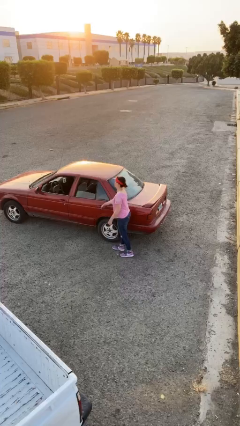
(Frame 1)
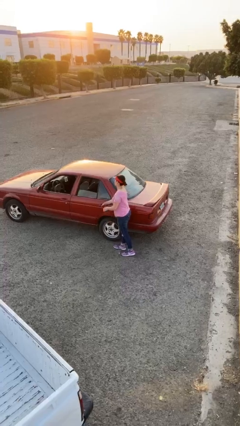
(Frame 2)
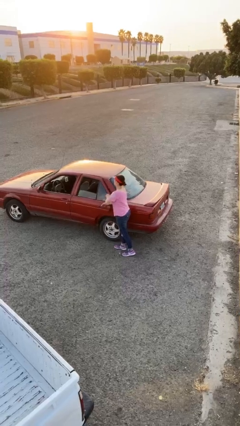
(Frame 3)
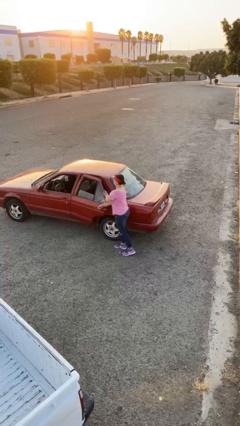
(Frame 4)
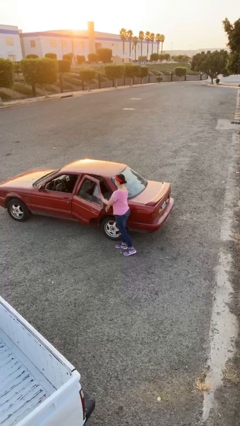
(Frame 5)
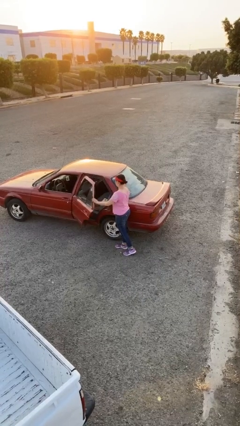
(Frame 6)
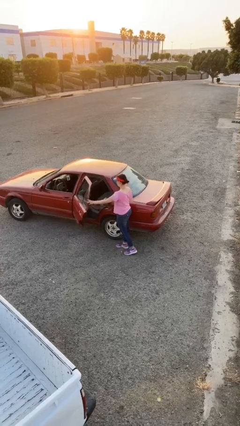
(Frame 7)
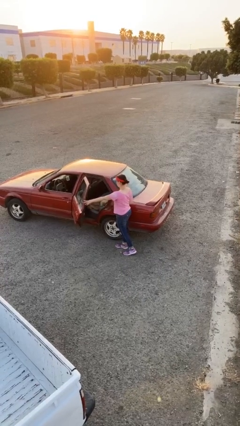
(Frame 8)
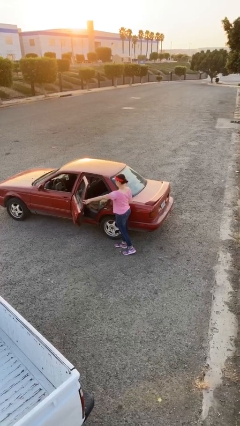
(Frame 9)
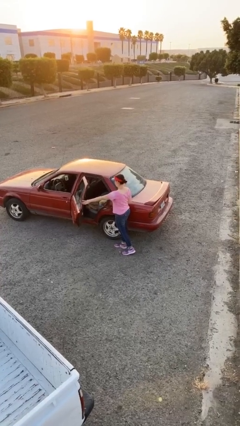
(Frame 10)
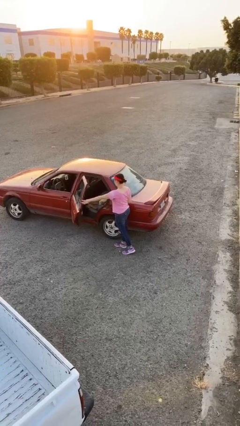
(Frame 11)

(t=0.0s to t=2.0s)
person opens car door

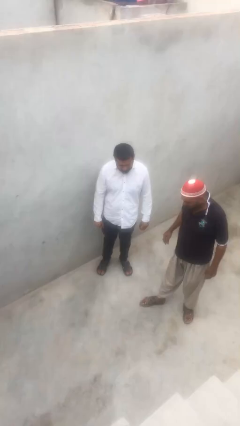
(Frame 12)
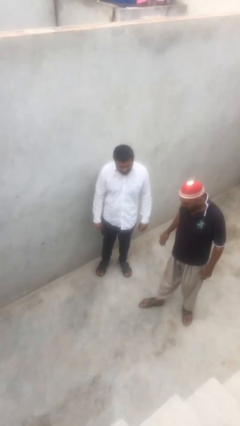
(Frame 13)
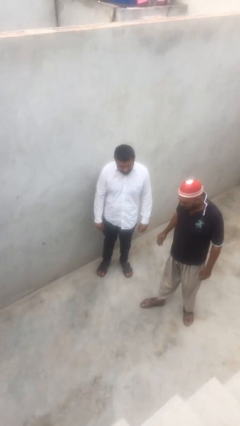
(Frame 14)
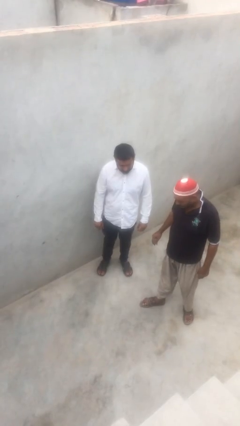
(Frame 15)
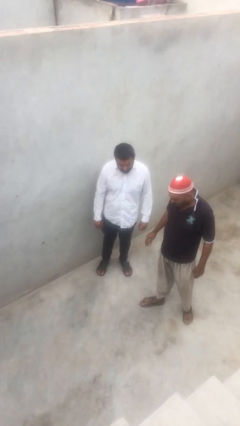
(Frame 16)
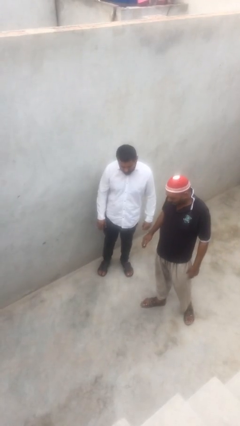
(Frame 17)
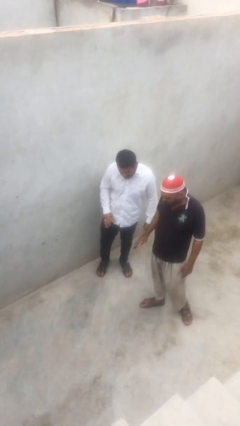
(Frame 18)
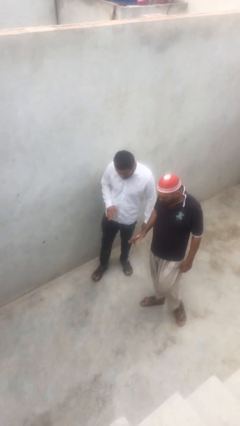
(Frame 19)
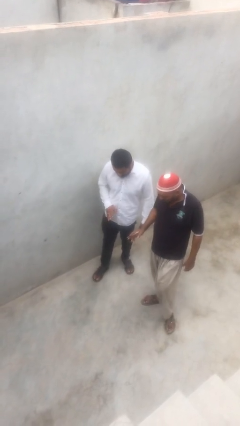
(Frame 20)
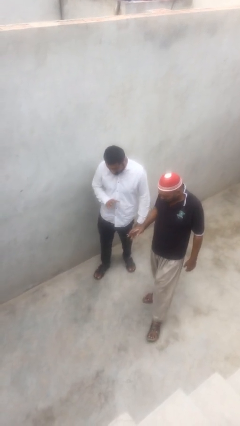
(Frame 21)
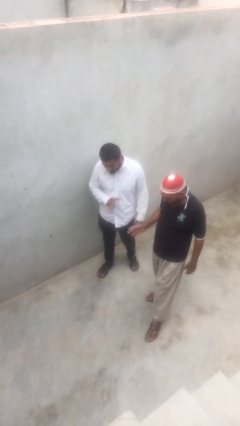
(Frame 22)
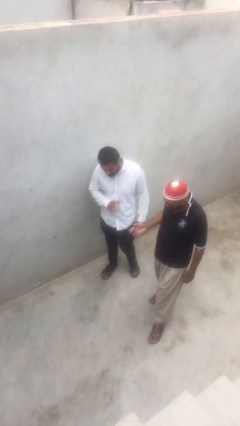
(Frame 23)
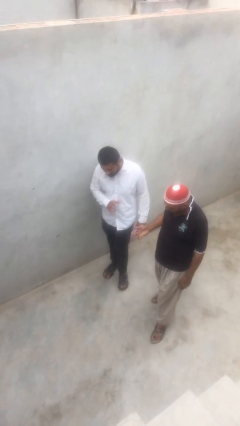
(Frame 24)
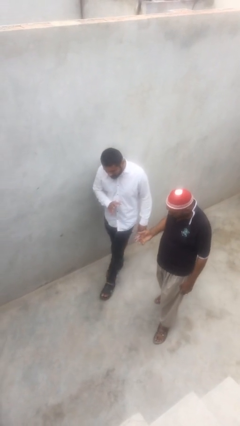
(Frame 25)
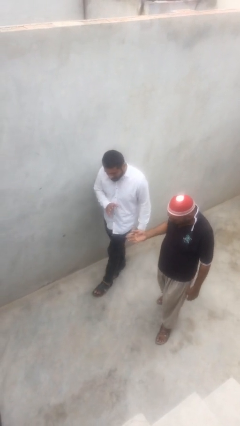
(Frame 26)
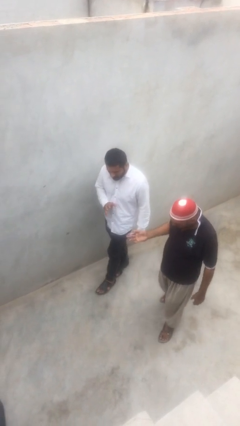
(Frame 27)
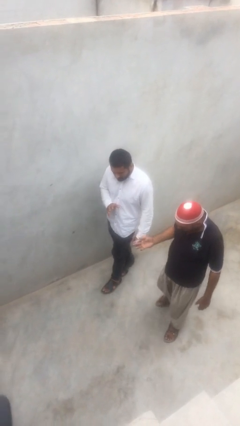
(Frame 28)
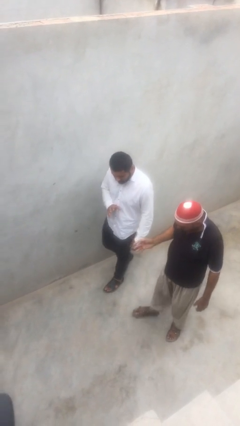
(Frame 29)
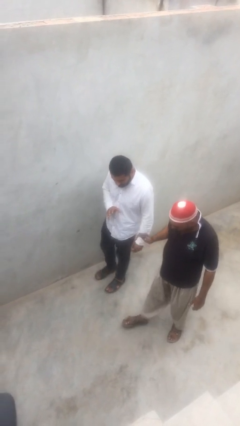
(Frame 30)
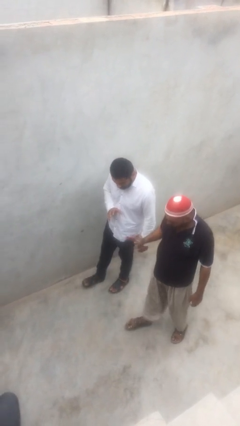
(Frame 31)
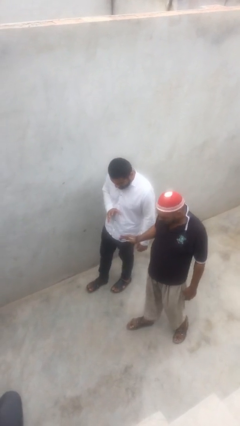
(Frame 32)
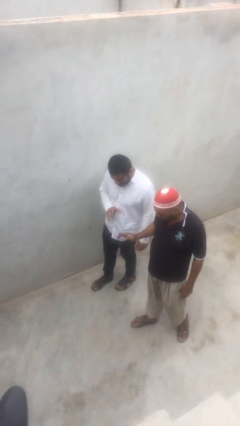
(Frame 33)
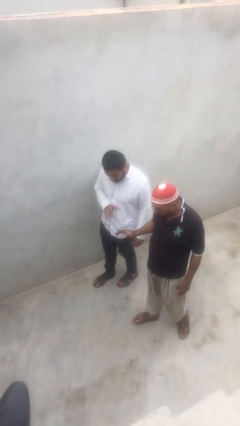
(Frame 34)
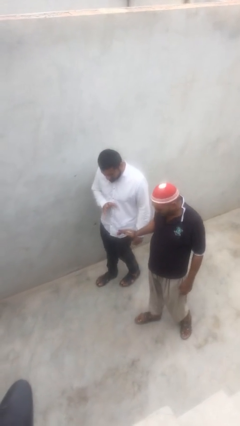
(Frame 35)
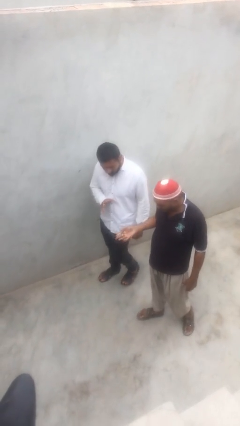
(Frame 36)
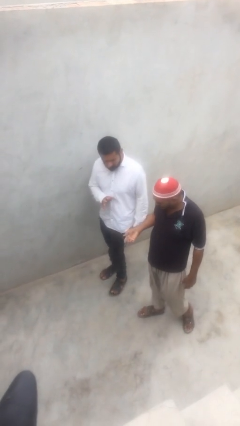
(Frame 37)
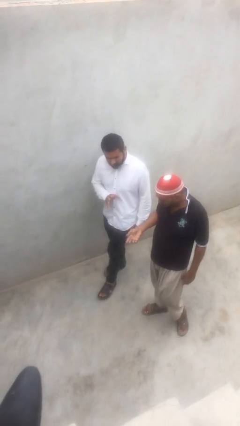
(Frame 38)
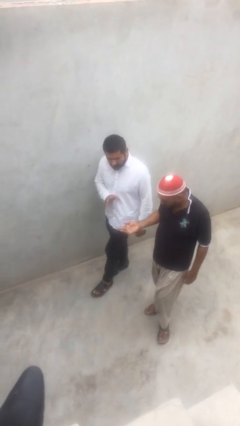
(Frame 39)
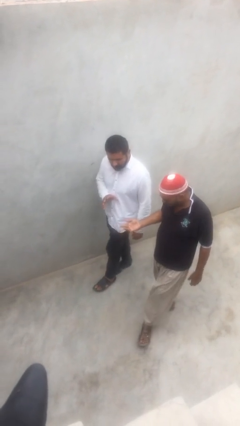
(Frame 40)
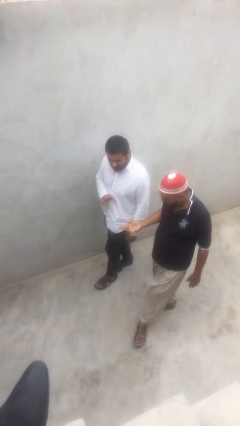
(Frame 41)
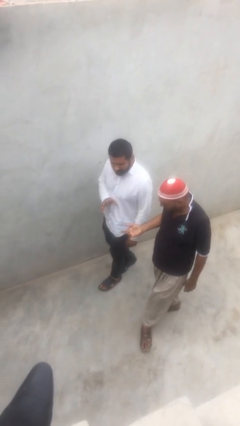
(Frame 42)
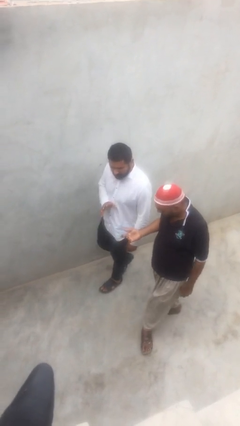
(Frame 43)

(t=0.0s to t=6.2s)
person talks to person

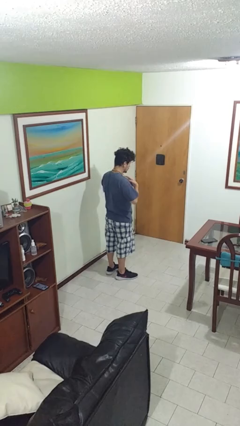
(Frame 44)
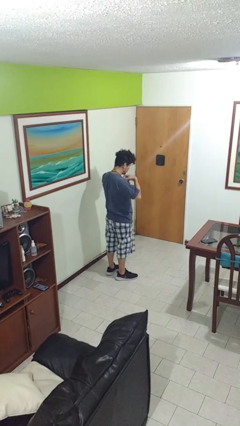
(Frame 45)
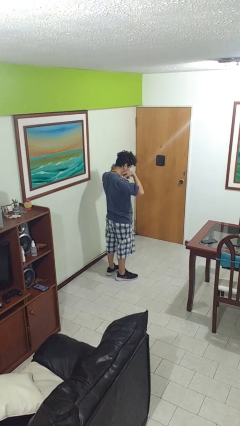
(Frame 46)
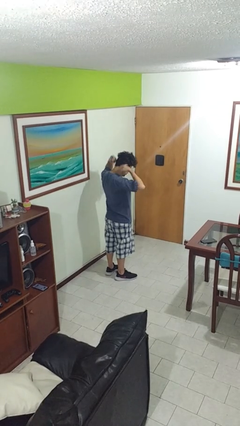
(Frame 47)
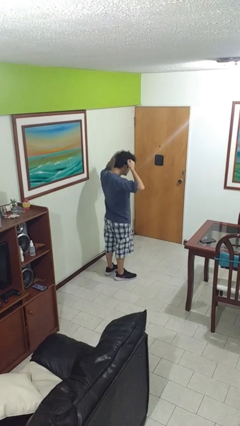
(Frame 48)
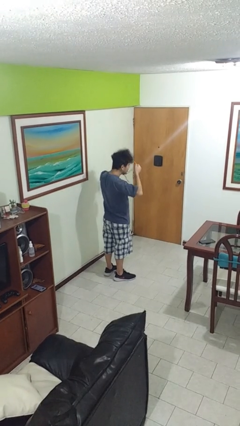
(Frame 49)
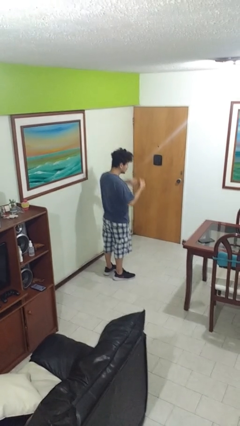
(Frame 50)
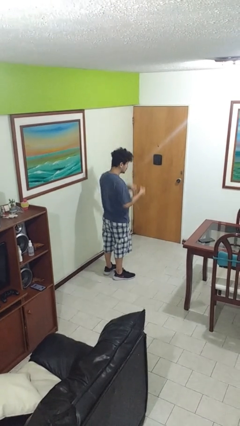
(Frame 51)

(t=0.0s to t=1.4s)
person takes off necklace

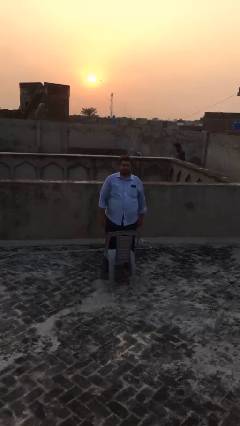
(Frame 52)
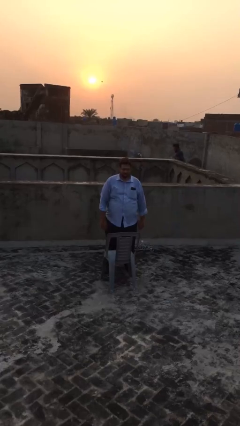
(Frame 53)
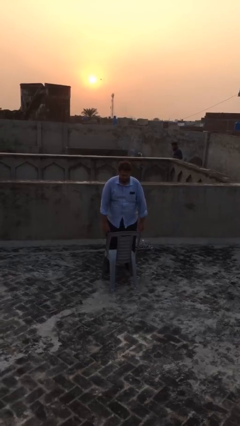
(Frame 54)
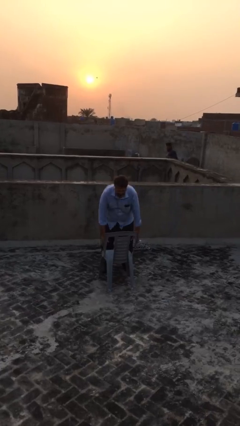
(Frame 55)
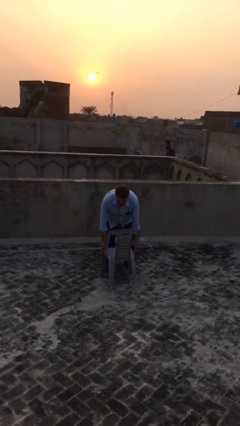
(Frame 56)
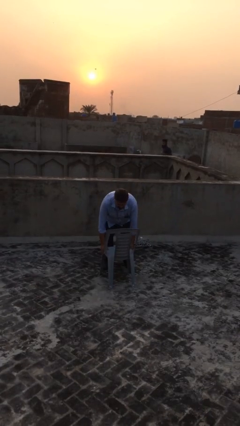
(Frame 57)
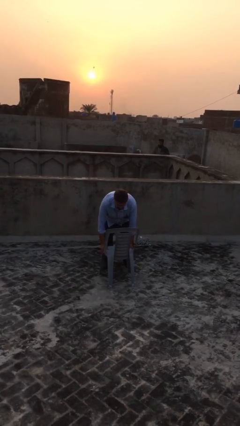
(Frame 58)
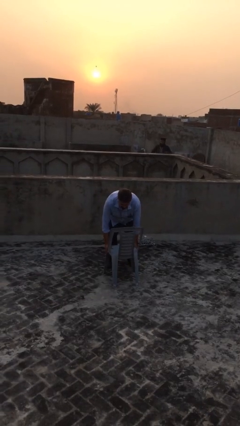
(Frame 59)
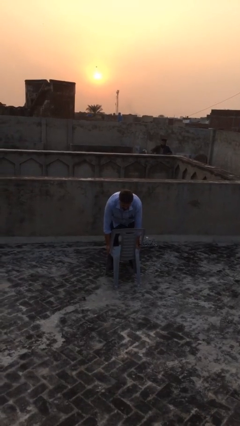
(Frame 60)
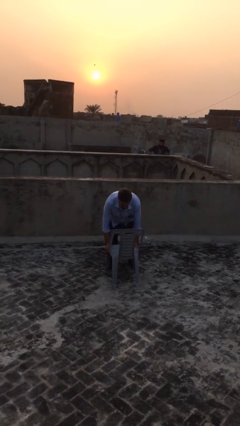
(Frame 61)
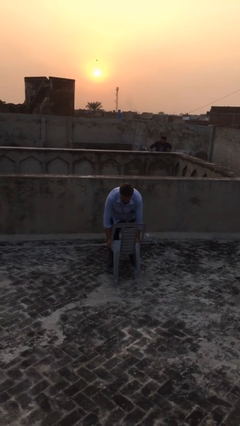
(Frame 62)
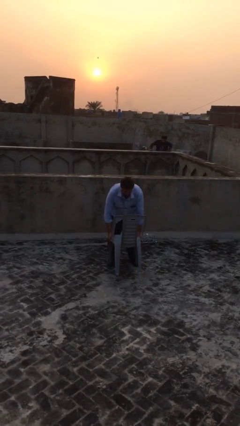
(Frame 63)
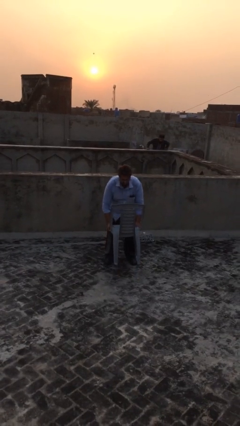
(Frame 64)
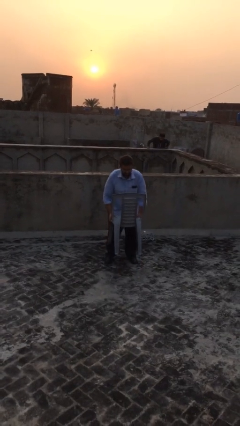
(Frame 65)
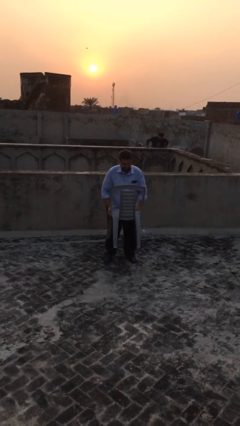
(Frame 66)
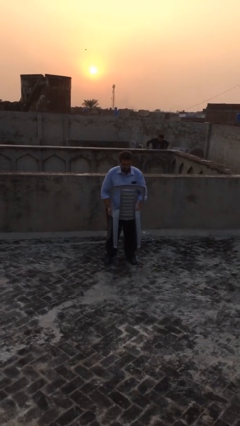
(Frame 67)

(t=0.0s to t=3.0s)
person picks up object from floor

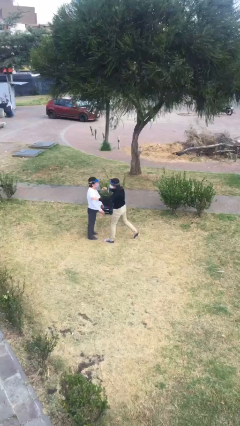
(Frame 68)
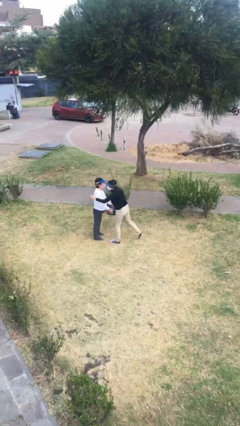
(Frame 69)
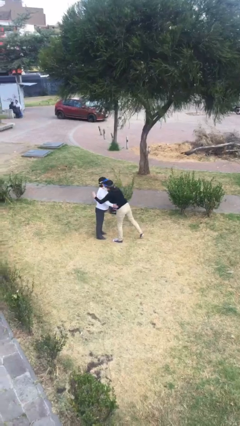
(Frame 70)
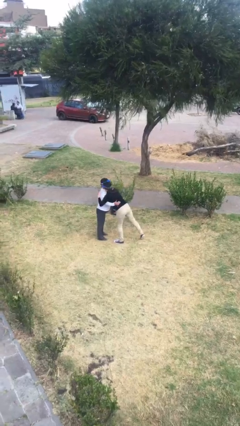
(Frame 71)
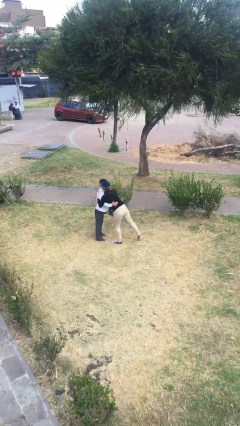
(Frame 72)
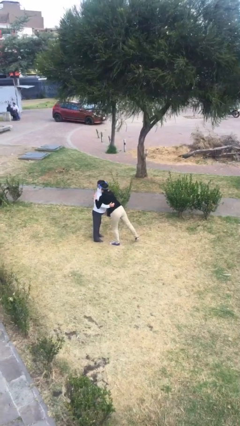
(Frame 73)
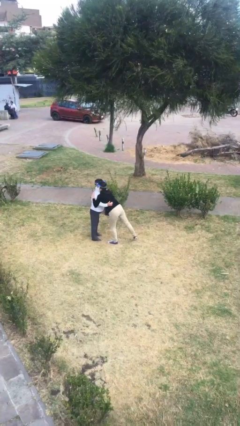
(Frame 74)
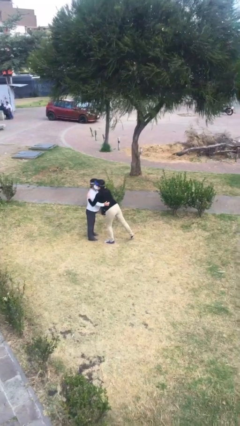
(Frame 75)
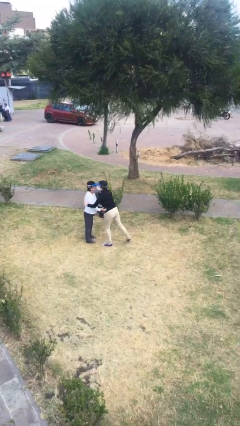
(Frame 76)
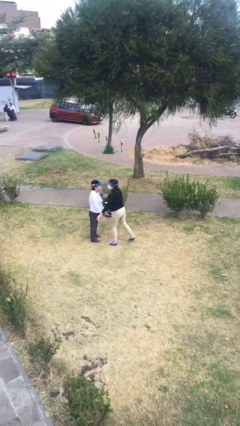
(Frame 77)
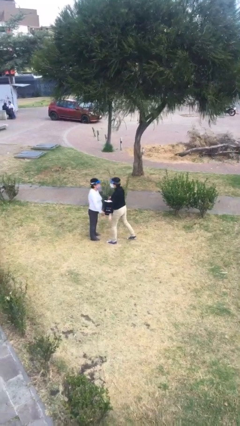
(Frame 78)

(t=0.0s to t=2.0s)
person embraces person

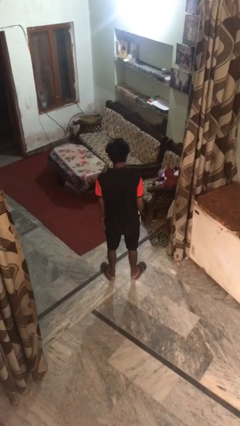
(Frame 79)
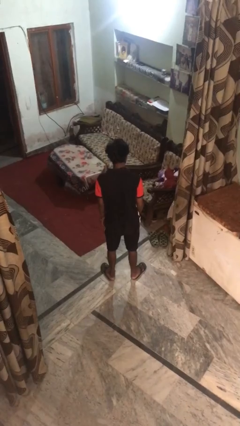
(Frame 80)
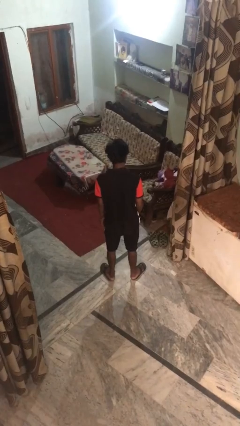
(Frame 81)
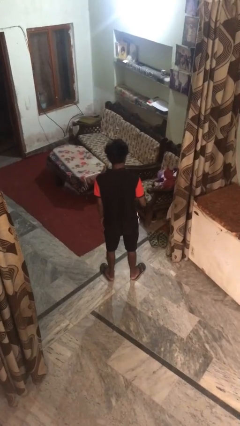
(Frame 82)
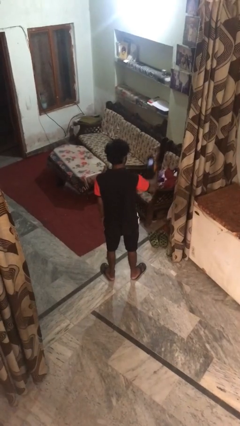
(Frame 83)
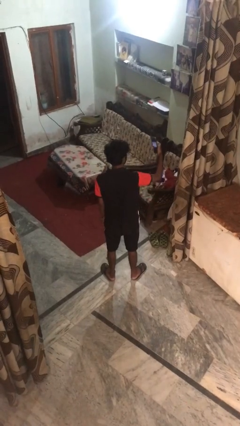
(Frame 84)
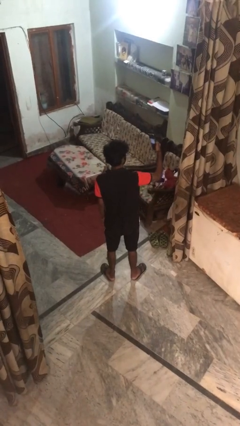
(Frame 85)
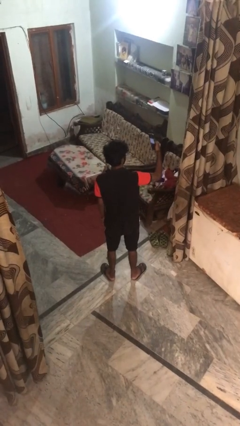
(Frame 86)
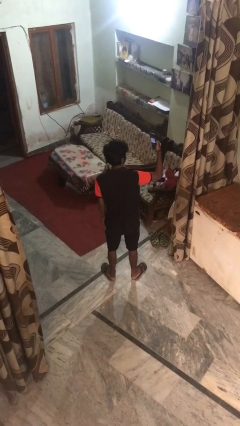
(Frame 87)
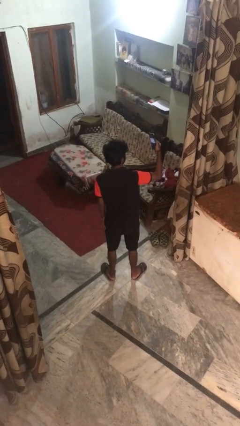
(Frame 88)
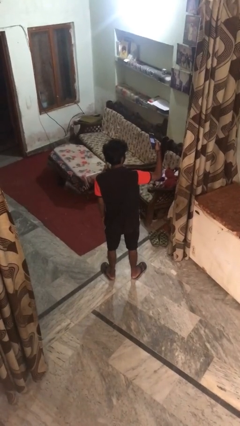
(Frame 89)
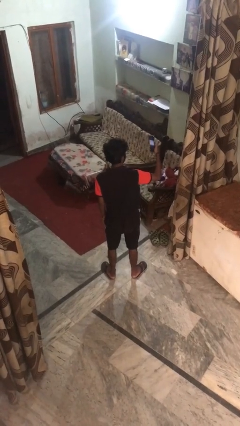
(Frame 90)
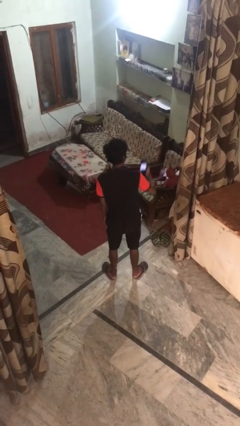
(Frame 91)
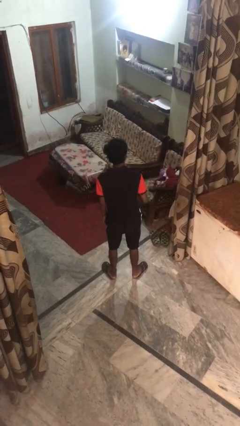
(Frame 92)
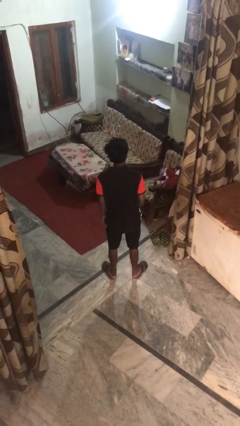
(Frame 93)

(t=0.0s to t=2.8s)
person takes selfie

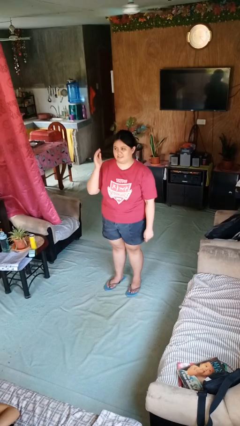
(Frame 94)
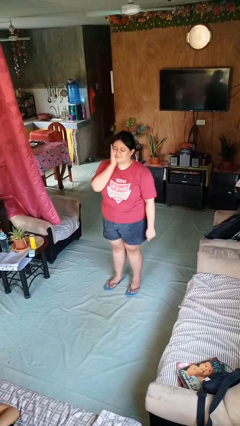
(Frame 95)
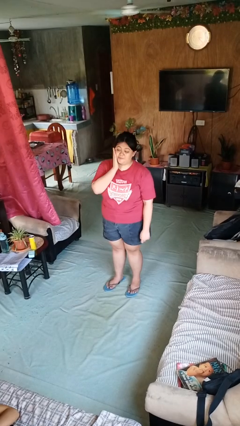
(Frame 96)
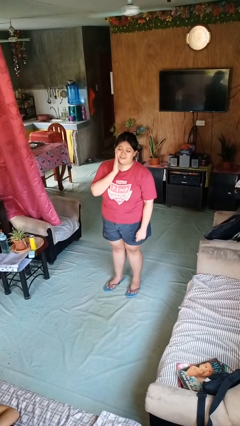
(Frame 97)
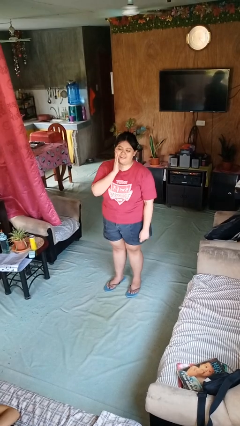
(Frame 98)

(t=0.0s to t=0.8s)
person swats bug
